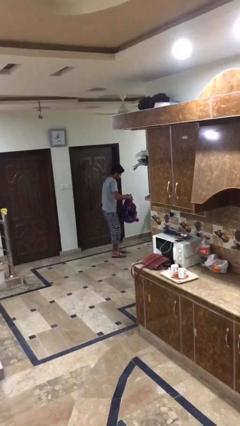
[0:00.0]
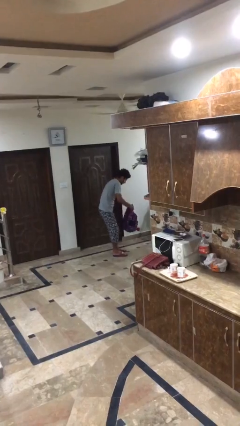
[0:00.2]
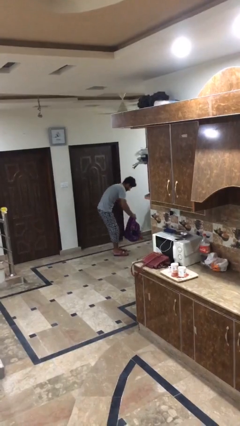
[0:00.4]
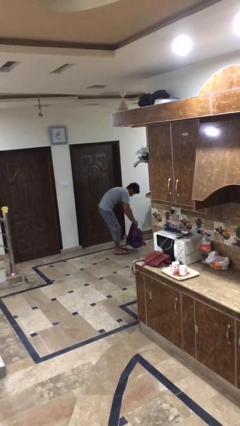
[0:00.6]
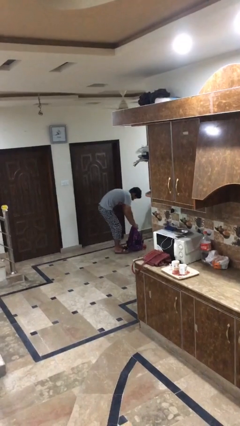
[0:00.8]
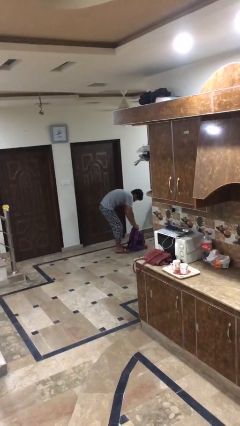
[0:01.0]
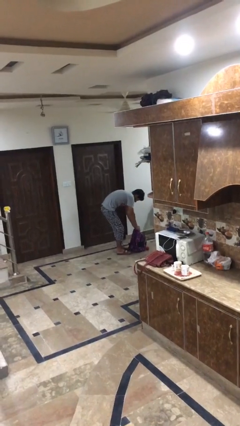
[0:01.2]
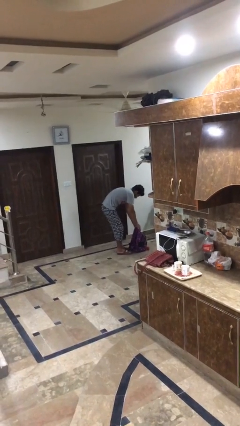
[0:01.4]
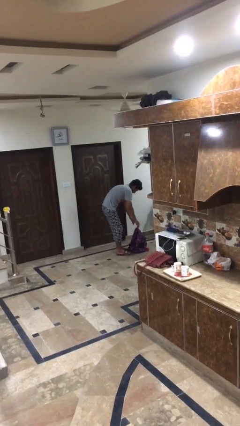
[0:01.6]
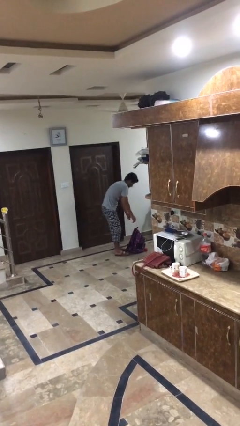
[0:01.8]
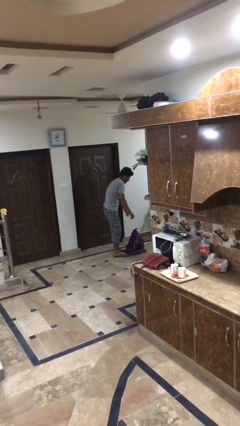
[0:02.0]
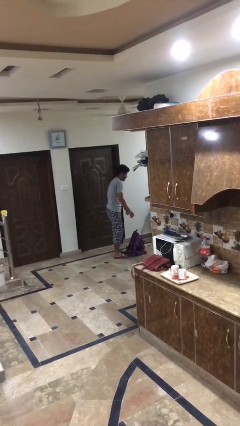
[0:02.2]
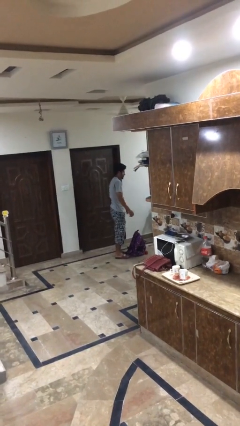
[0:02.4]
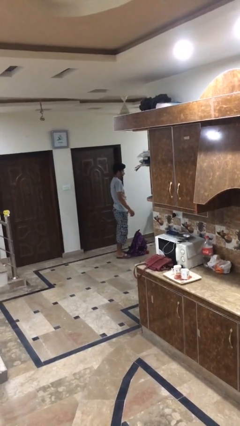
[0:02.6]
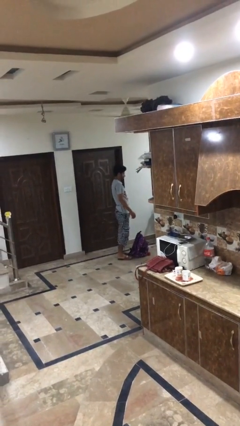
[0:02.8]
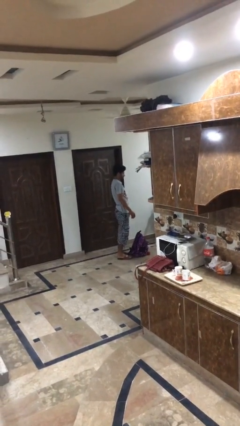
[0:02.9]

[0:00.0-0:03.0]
person puts down object on floor

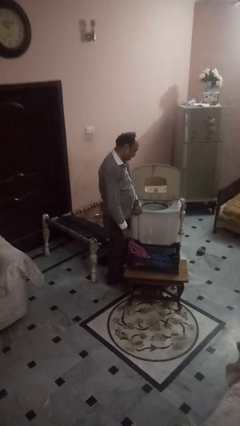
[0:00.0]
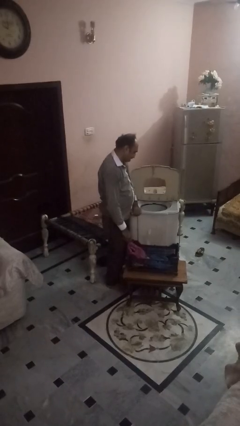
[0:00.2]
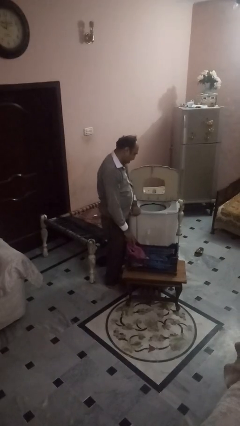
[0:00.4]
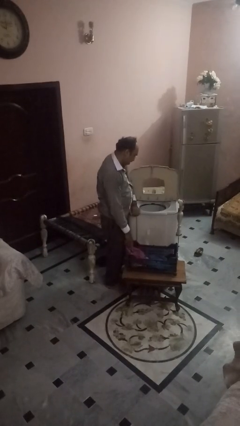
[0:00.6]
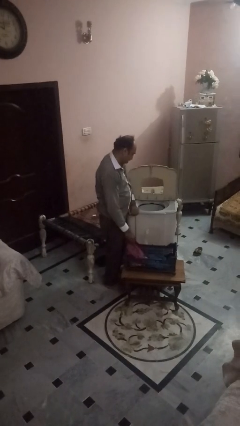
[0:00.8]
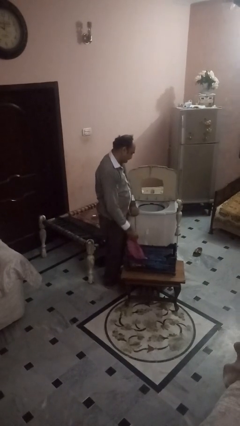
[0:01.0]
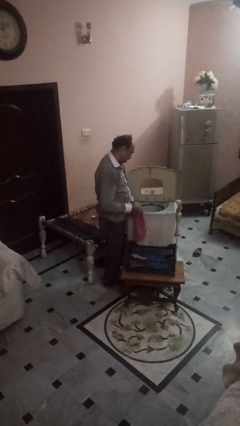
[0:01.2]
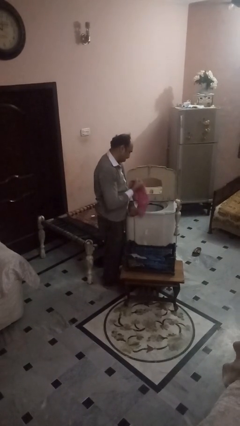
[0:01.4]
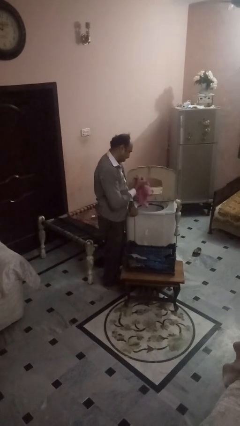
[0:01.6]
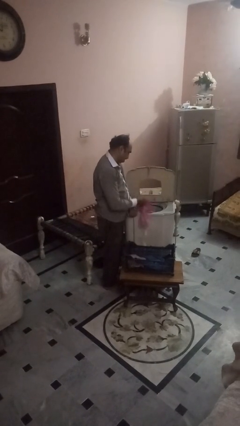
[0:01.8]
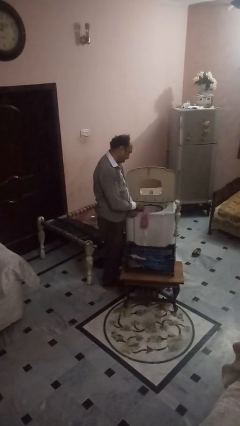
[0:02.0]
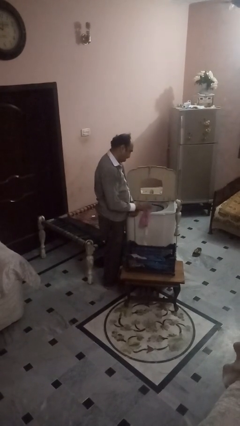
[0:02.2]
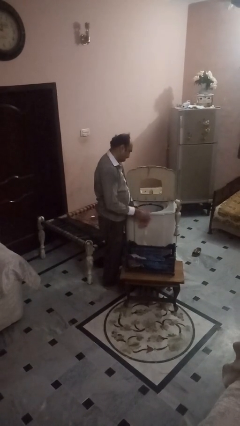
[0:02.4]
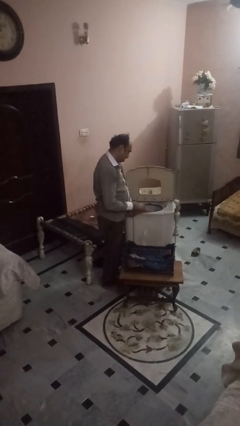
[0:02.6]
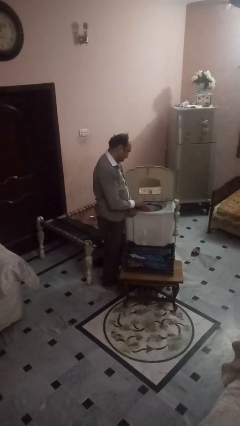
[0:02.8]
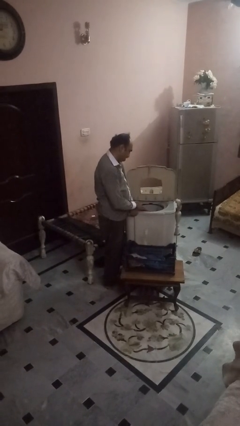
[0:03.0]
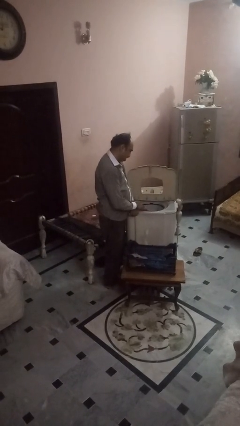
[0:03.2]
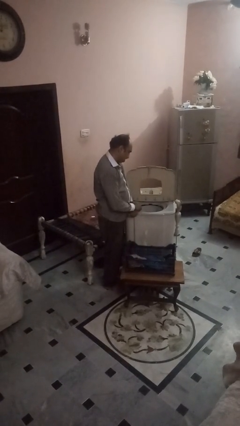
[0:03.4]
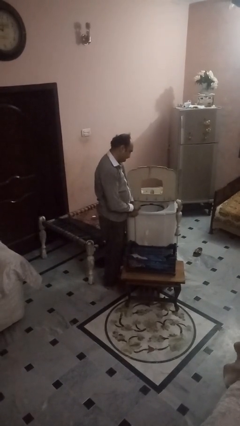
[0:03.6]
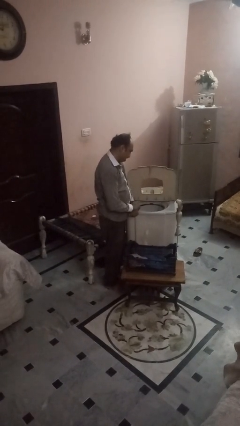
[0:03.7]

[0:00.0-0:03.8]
person loads dryer

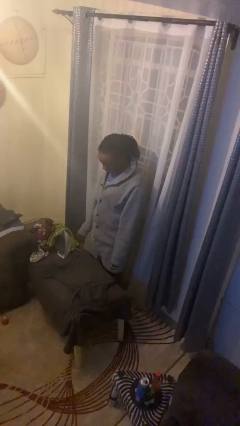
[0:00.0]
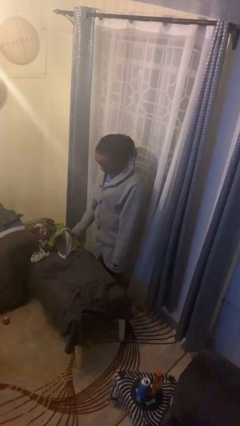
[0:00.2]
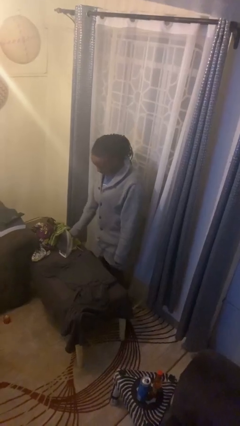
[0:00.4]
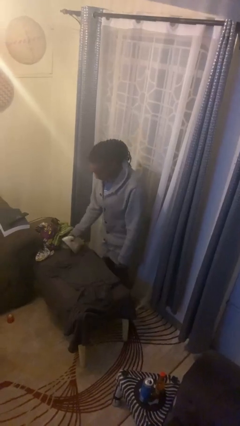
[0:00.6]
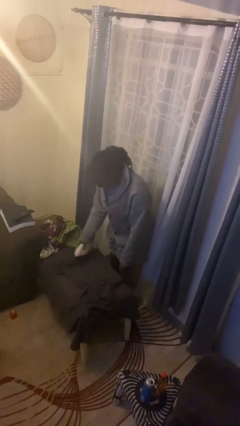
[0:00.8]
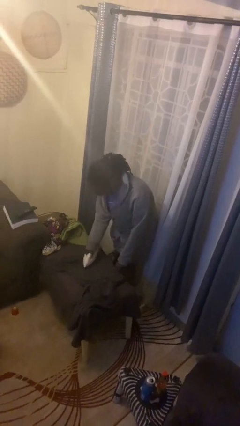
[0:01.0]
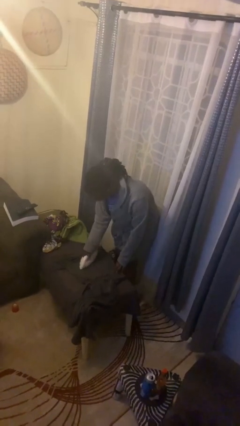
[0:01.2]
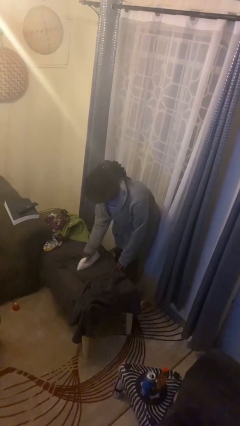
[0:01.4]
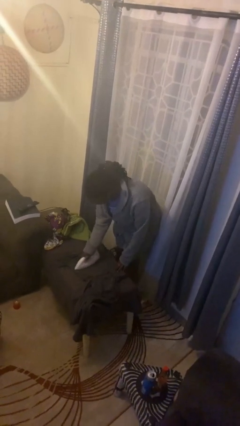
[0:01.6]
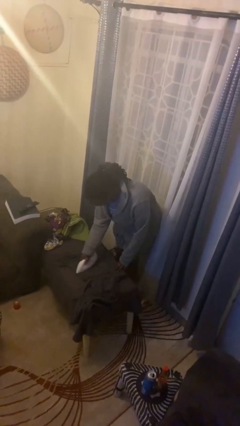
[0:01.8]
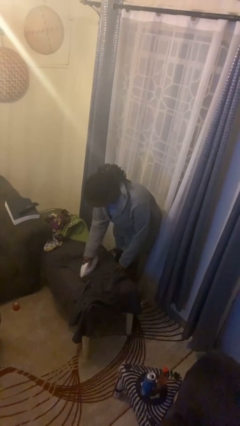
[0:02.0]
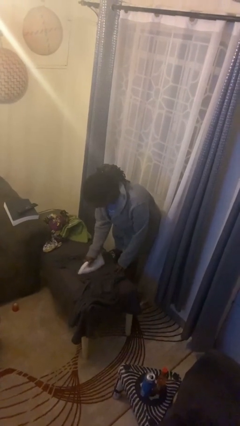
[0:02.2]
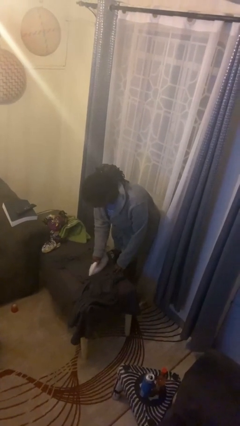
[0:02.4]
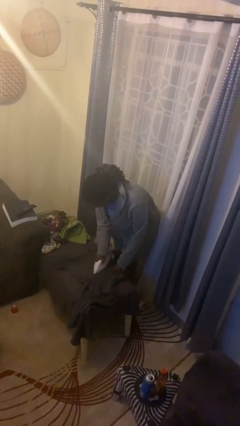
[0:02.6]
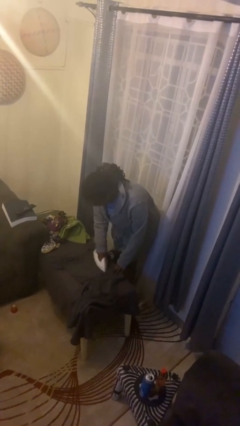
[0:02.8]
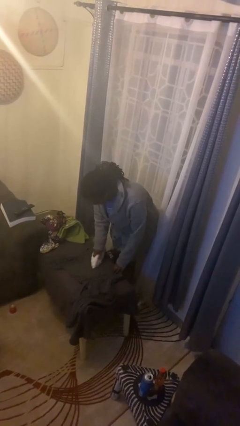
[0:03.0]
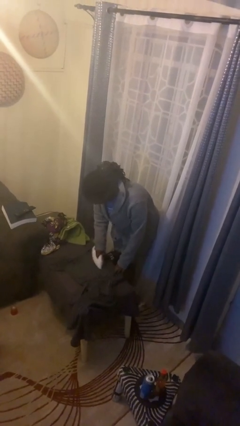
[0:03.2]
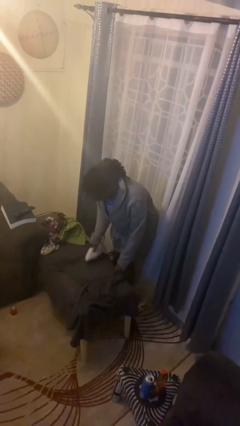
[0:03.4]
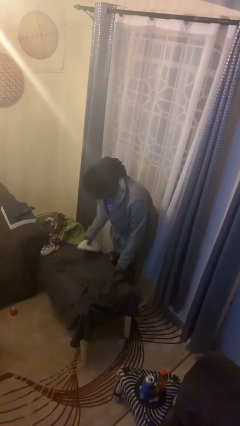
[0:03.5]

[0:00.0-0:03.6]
person irons clothes

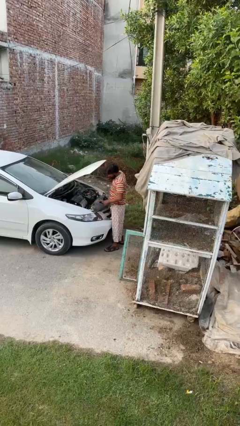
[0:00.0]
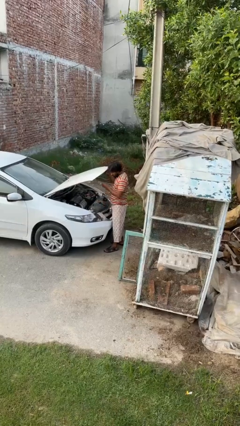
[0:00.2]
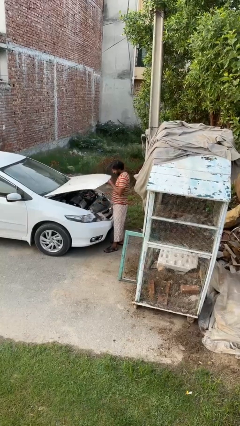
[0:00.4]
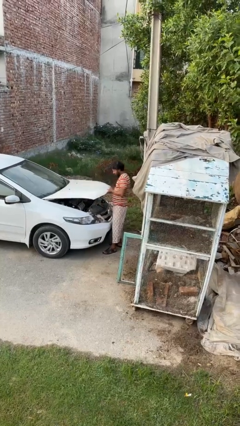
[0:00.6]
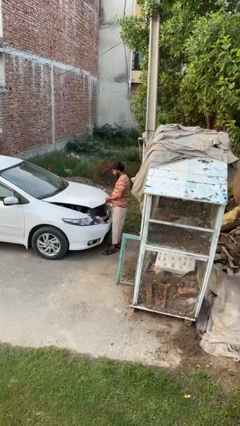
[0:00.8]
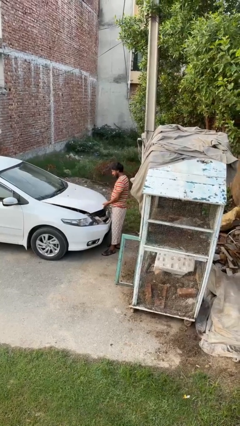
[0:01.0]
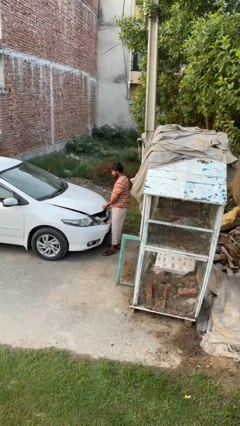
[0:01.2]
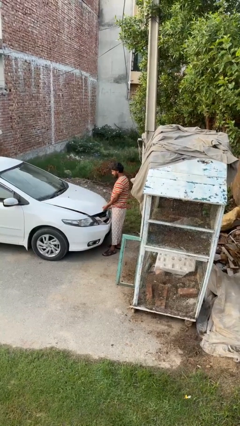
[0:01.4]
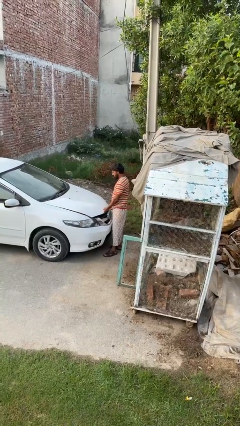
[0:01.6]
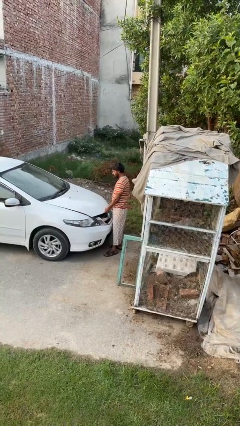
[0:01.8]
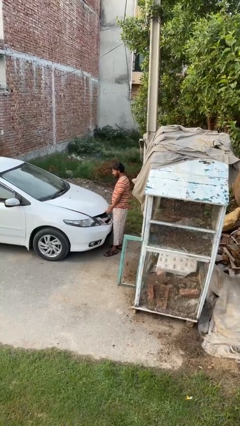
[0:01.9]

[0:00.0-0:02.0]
person closes car hood

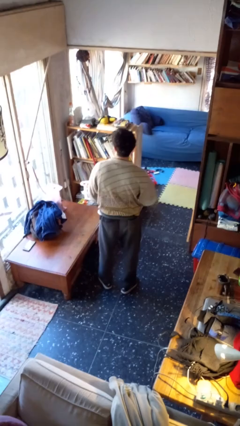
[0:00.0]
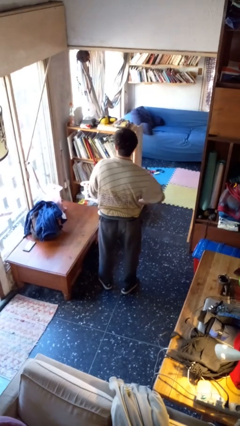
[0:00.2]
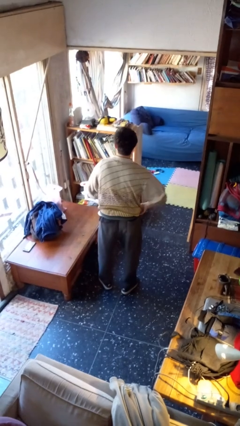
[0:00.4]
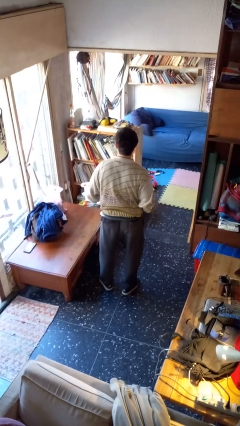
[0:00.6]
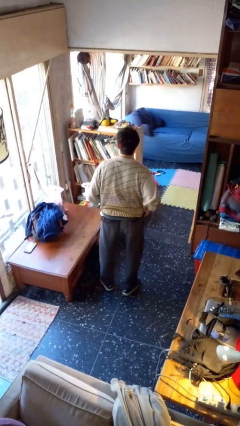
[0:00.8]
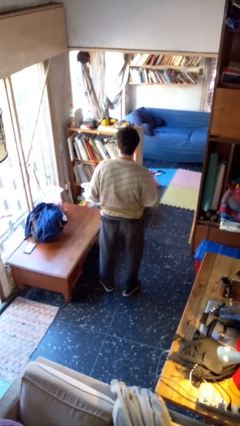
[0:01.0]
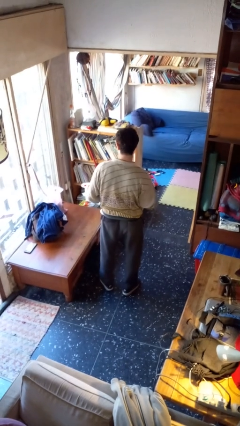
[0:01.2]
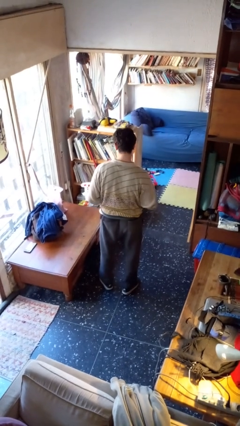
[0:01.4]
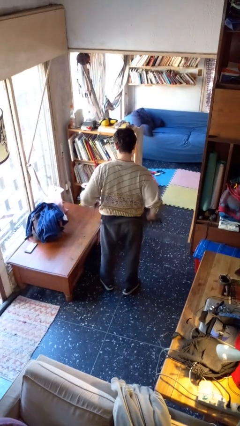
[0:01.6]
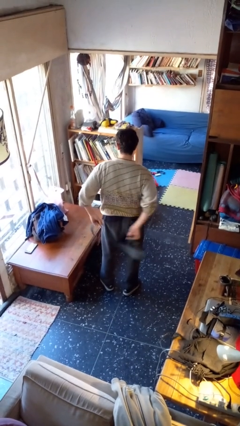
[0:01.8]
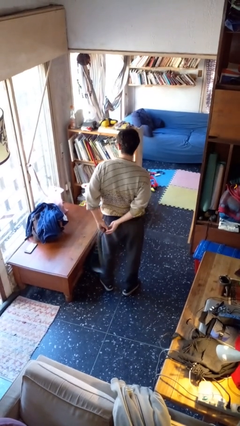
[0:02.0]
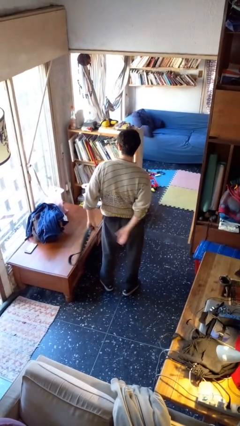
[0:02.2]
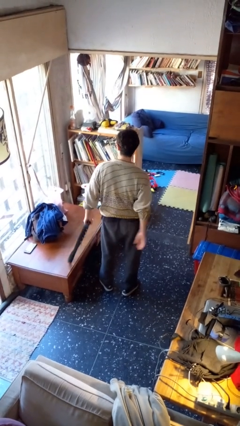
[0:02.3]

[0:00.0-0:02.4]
person takes off belt

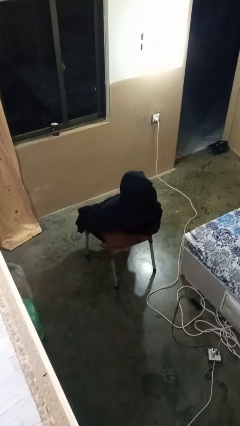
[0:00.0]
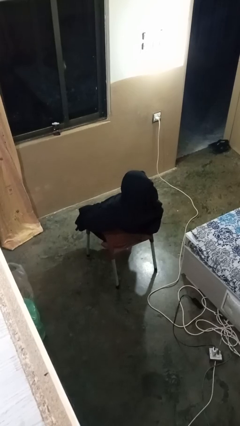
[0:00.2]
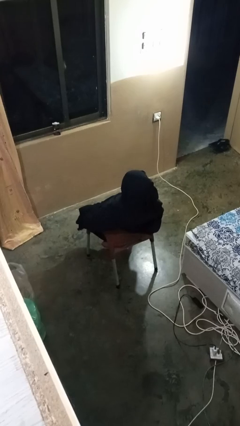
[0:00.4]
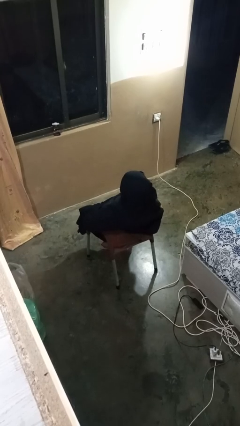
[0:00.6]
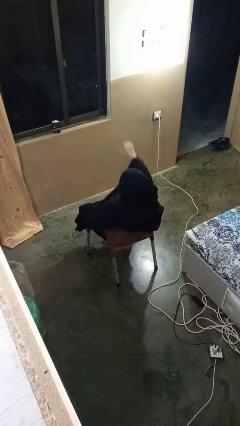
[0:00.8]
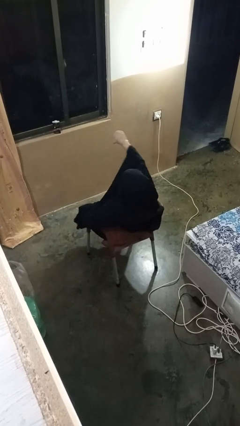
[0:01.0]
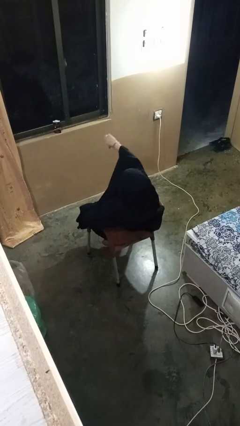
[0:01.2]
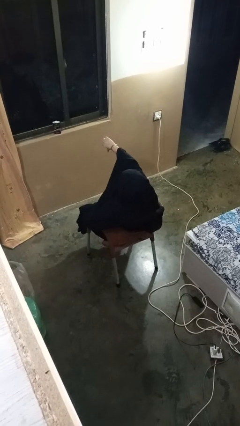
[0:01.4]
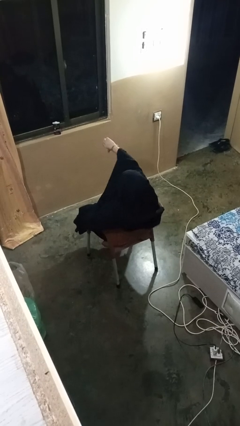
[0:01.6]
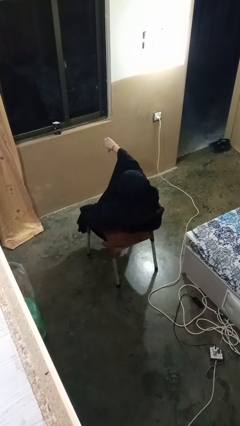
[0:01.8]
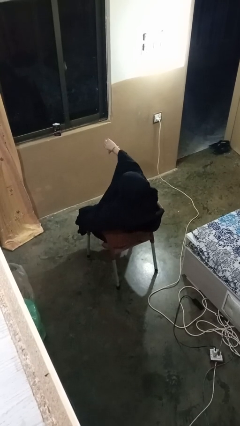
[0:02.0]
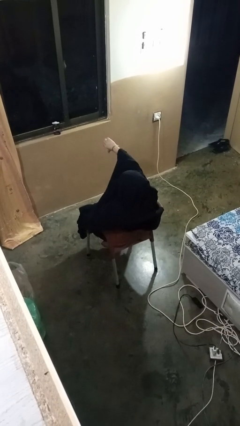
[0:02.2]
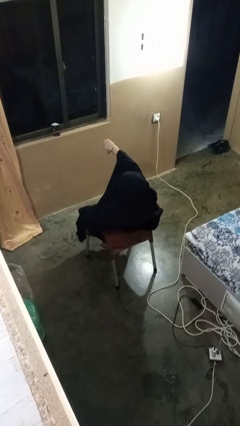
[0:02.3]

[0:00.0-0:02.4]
person gestures thumbs down

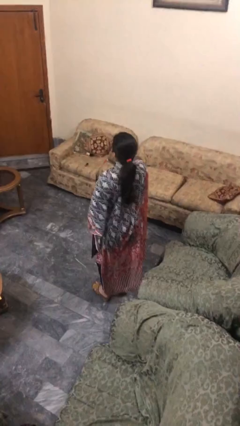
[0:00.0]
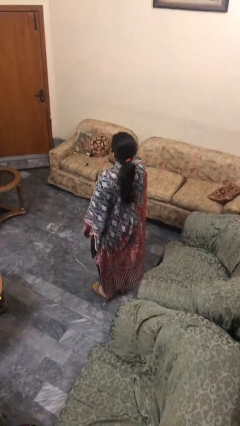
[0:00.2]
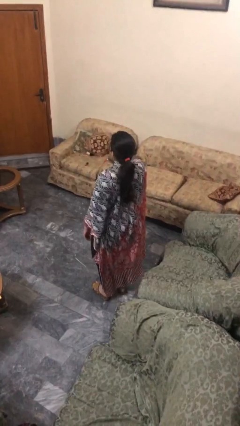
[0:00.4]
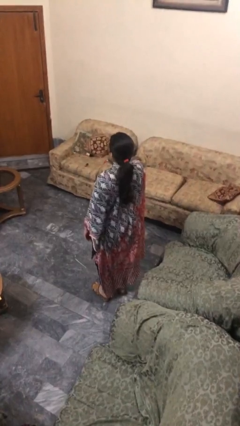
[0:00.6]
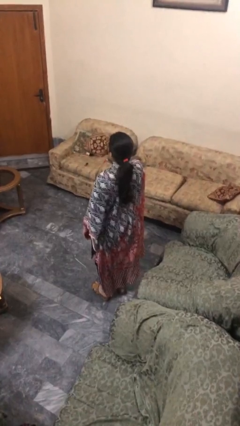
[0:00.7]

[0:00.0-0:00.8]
person picks up object from floor
